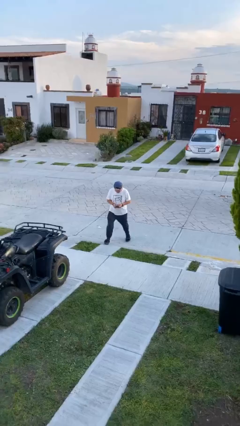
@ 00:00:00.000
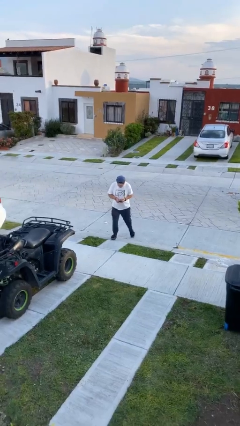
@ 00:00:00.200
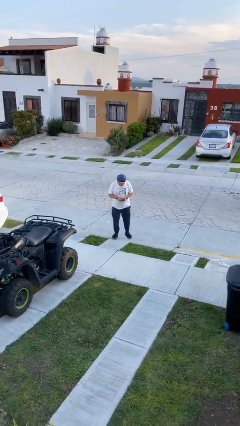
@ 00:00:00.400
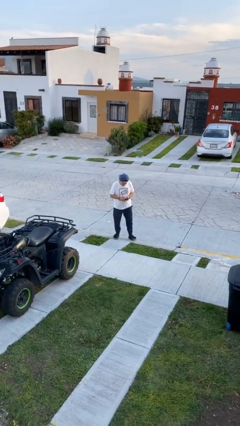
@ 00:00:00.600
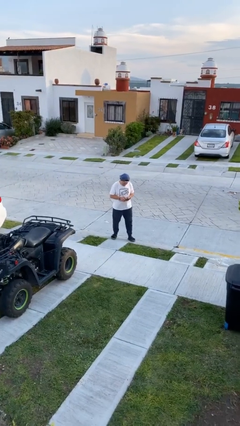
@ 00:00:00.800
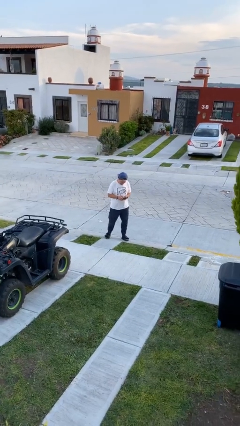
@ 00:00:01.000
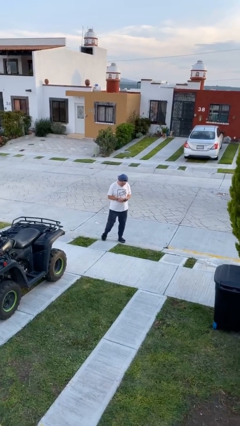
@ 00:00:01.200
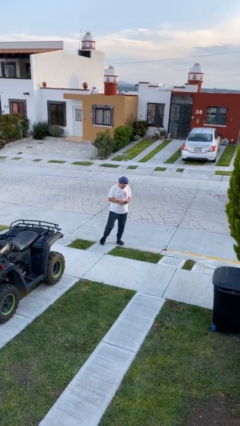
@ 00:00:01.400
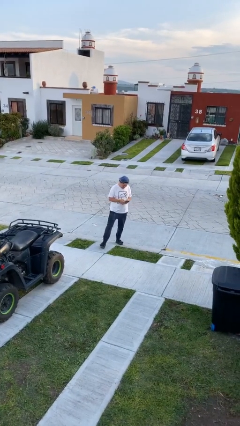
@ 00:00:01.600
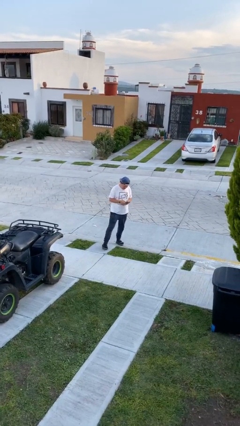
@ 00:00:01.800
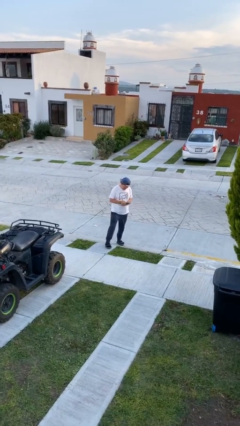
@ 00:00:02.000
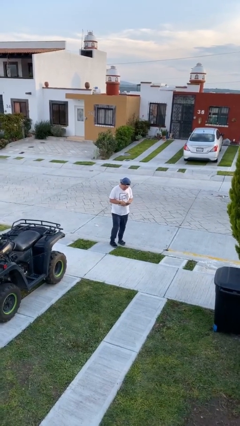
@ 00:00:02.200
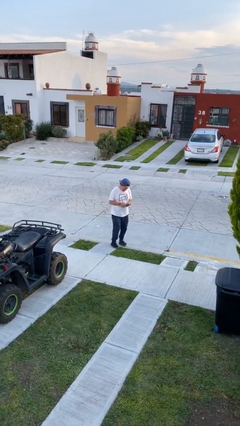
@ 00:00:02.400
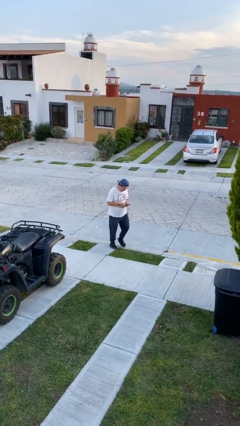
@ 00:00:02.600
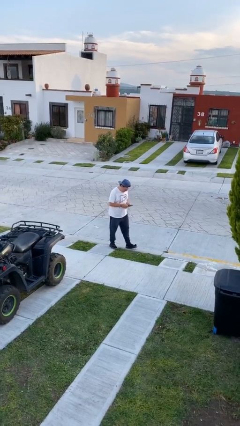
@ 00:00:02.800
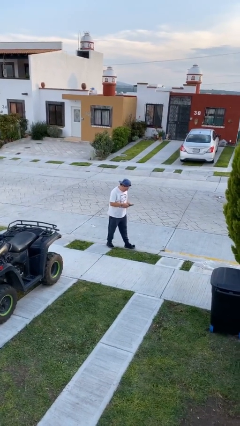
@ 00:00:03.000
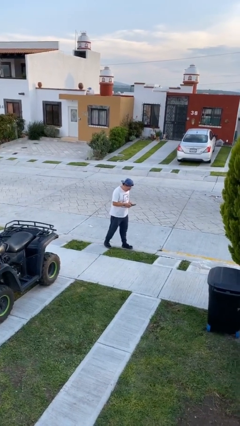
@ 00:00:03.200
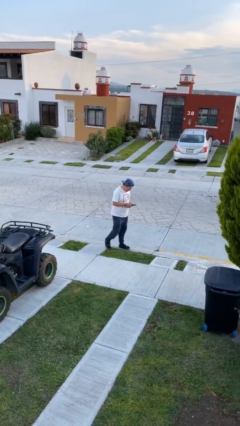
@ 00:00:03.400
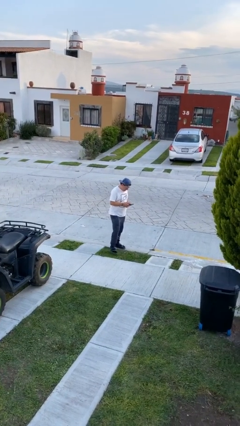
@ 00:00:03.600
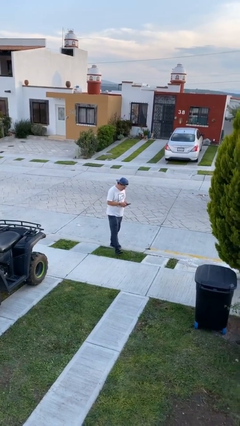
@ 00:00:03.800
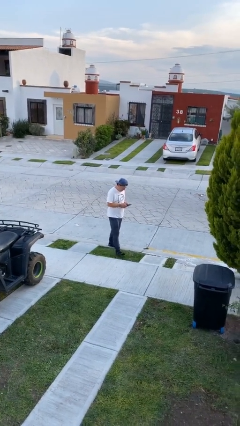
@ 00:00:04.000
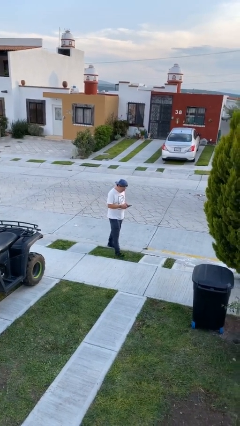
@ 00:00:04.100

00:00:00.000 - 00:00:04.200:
person texts on phone

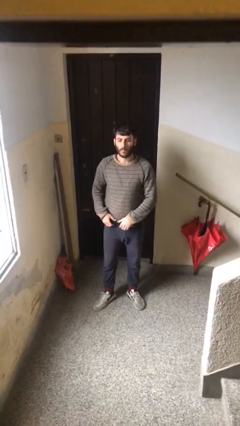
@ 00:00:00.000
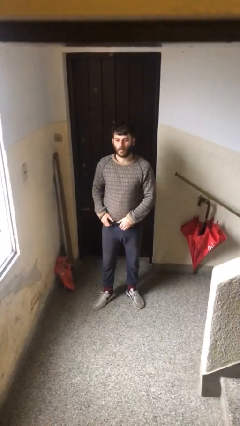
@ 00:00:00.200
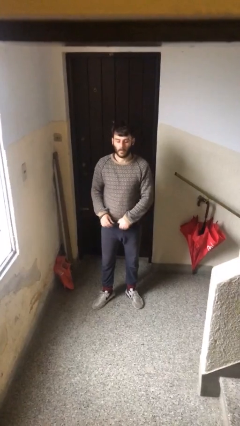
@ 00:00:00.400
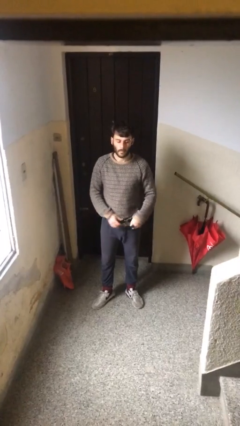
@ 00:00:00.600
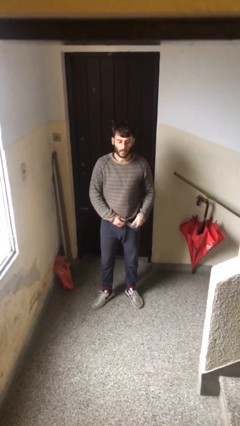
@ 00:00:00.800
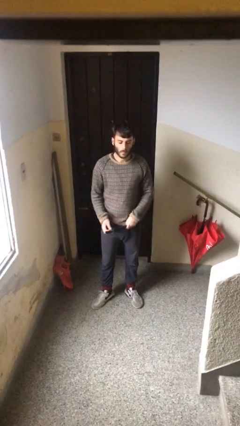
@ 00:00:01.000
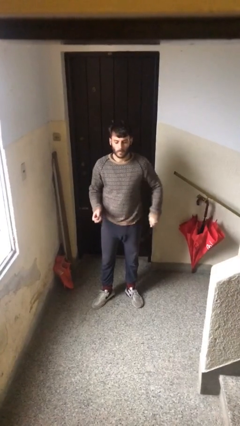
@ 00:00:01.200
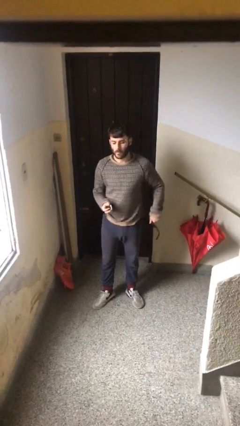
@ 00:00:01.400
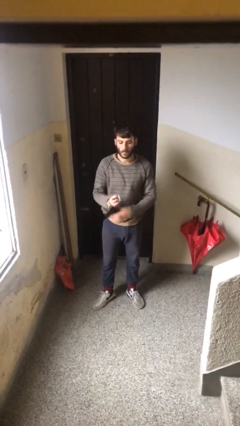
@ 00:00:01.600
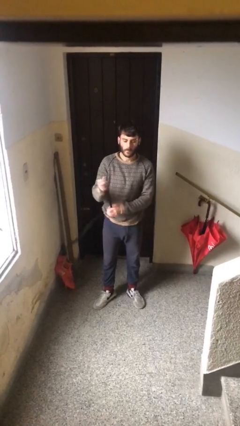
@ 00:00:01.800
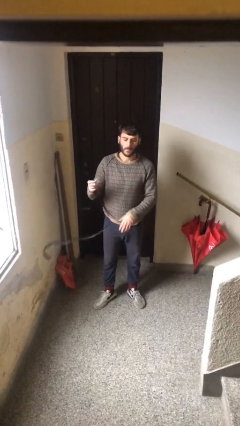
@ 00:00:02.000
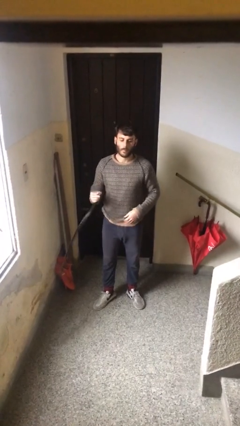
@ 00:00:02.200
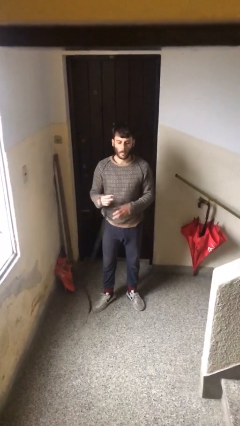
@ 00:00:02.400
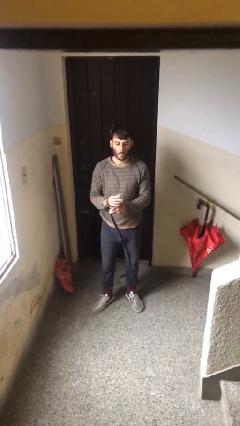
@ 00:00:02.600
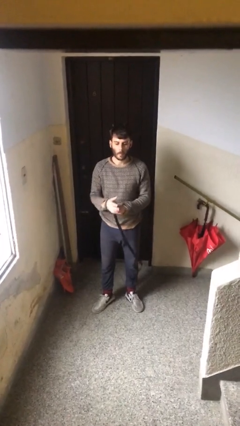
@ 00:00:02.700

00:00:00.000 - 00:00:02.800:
person takes off belt

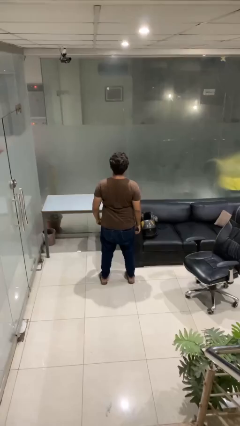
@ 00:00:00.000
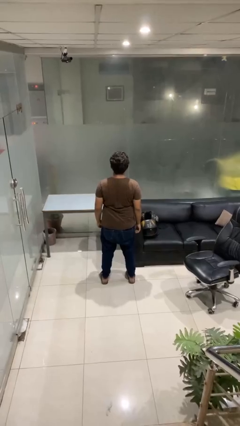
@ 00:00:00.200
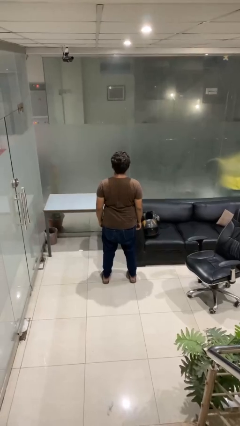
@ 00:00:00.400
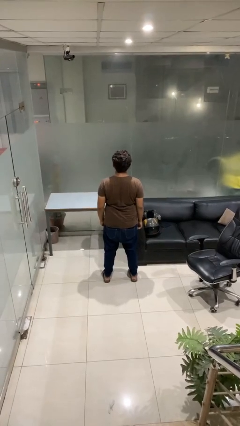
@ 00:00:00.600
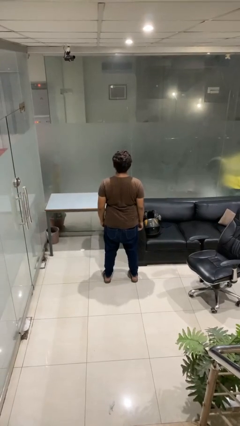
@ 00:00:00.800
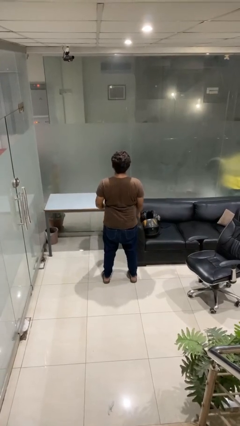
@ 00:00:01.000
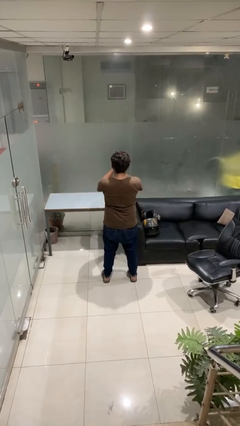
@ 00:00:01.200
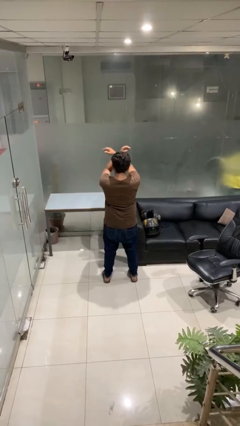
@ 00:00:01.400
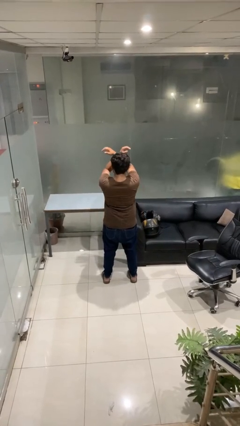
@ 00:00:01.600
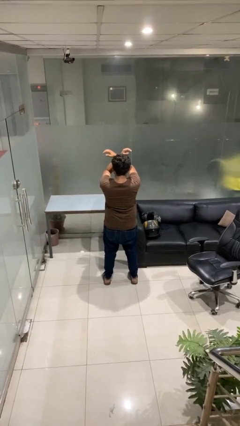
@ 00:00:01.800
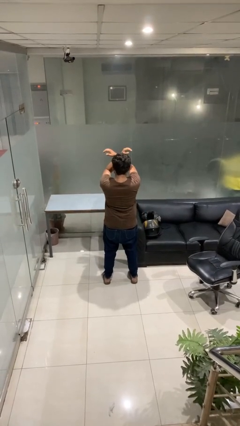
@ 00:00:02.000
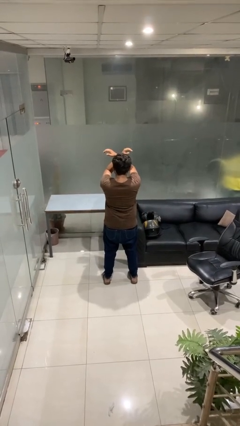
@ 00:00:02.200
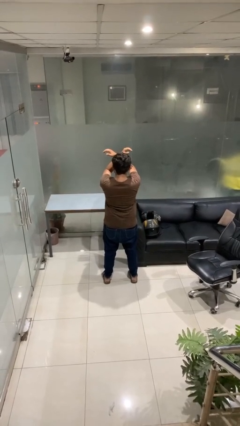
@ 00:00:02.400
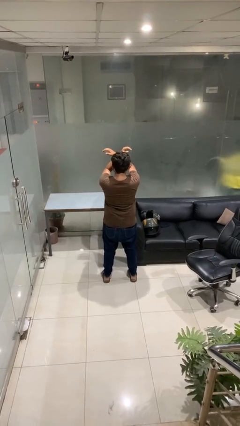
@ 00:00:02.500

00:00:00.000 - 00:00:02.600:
person gestures arms x

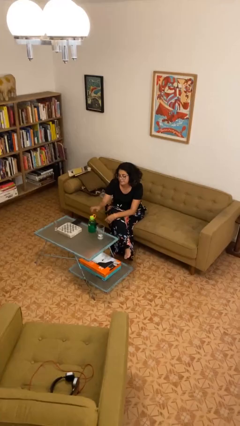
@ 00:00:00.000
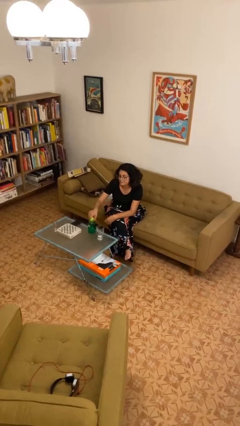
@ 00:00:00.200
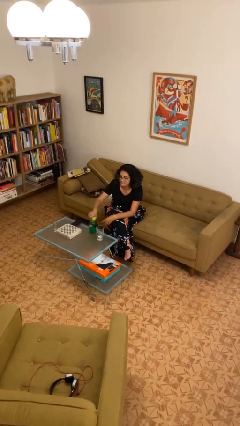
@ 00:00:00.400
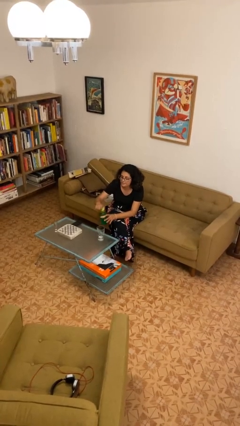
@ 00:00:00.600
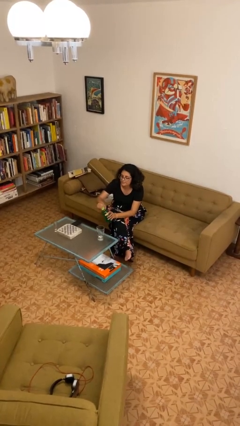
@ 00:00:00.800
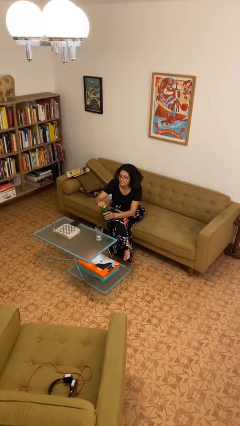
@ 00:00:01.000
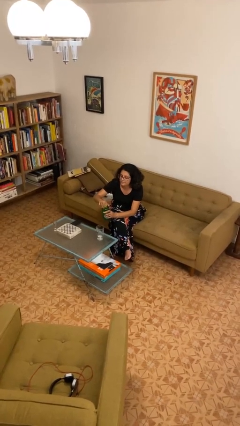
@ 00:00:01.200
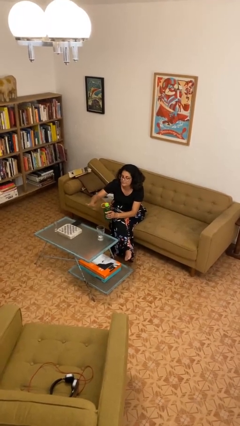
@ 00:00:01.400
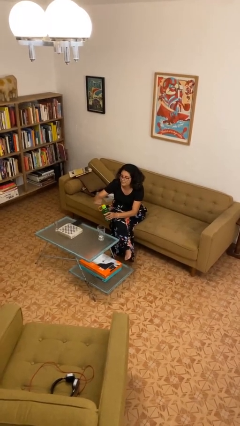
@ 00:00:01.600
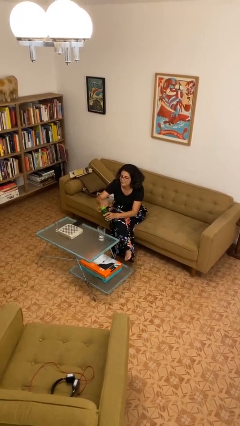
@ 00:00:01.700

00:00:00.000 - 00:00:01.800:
person unscrews lid from bottle

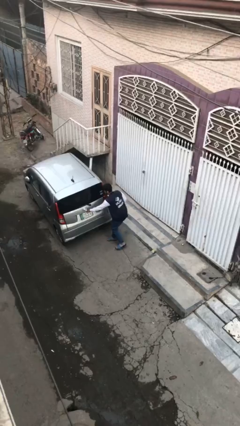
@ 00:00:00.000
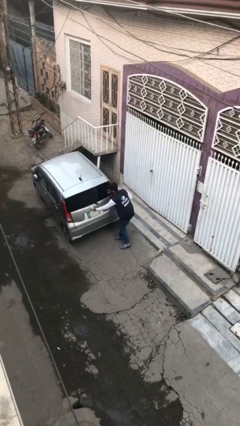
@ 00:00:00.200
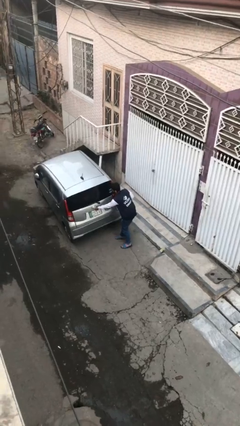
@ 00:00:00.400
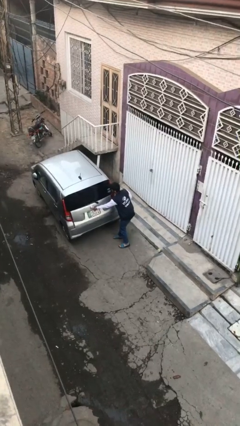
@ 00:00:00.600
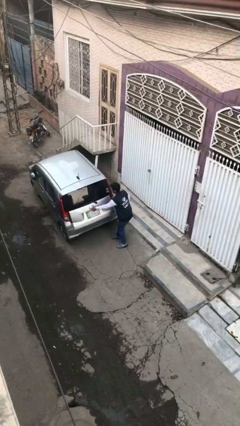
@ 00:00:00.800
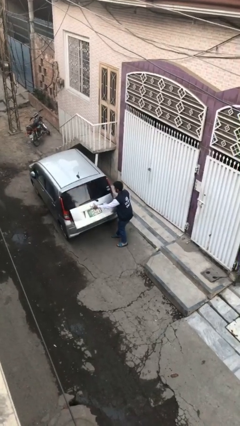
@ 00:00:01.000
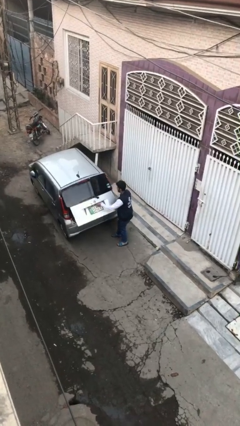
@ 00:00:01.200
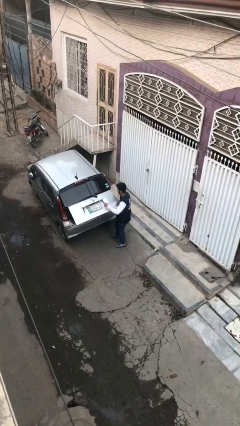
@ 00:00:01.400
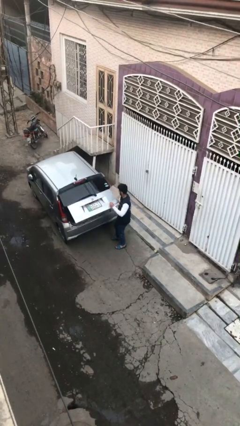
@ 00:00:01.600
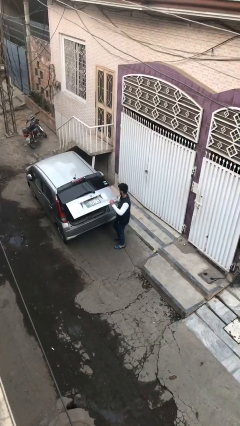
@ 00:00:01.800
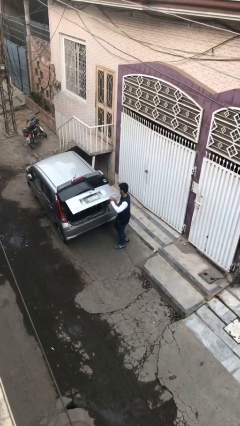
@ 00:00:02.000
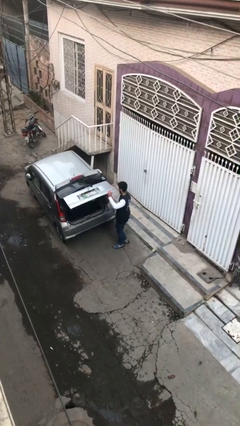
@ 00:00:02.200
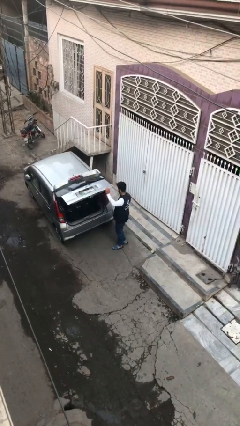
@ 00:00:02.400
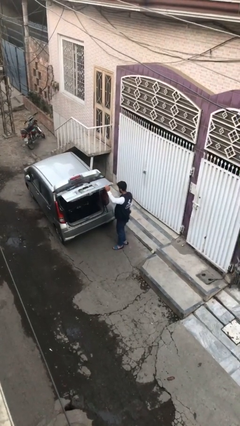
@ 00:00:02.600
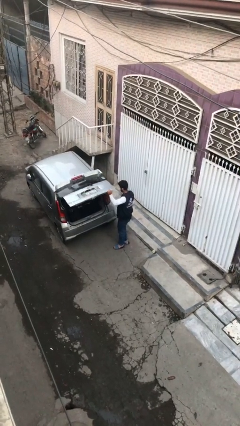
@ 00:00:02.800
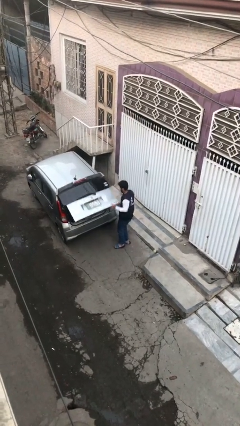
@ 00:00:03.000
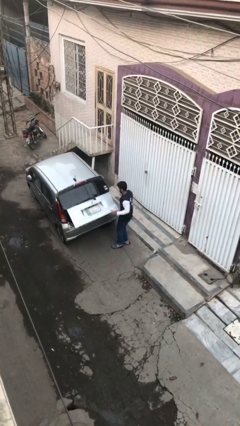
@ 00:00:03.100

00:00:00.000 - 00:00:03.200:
person opens car trunk

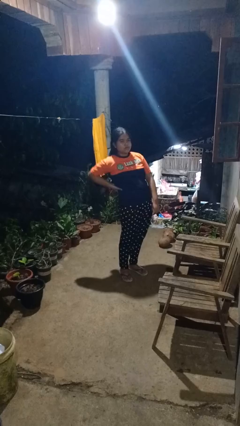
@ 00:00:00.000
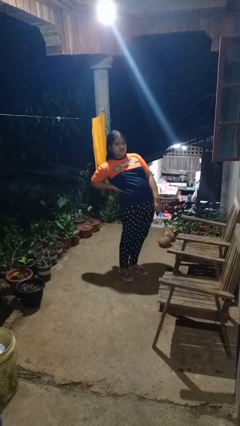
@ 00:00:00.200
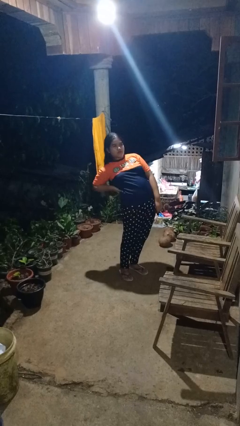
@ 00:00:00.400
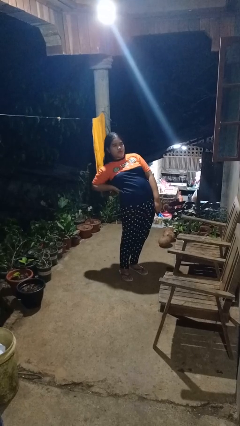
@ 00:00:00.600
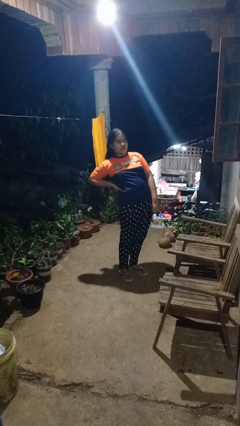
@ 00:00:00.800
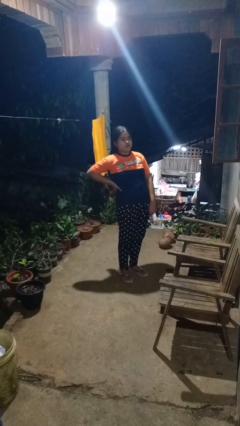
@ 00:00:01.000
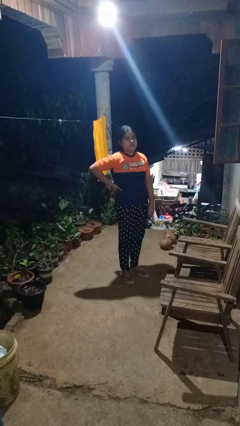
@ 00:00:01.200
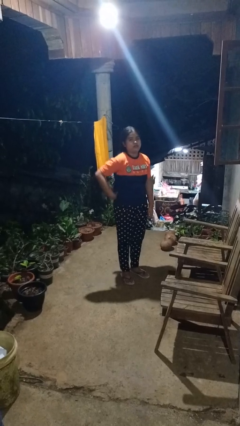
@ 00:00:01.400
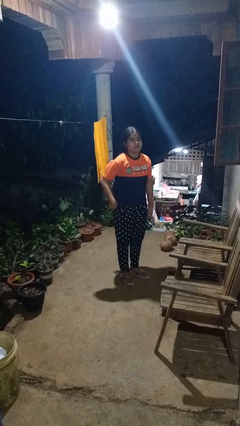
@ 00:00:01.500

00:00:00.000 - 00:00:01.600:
person stretches back

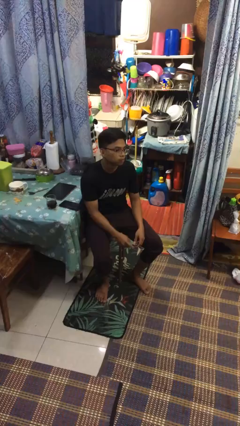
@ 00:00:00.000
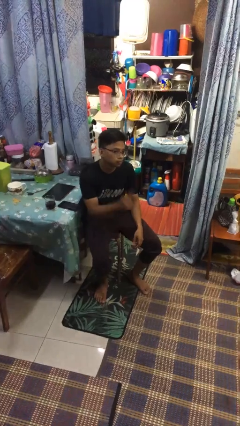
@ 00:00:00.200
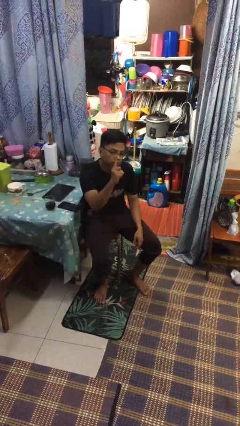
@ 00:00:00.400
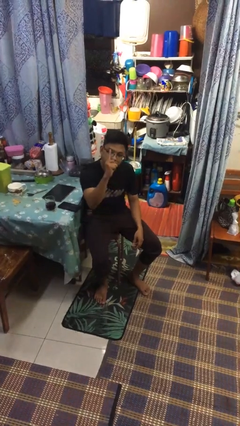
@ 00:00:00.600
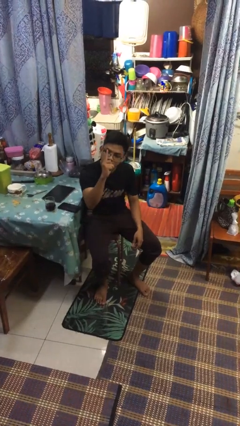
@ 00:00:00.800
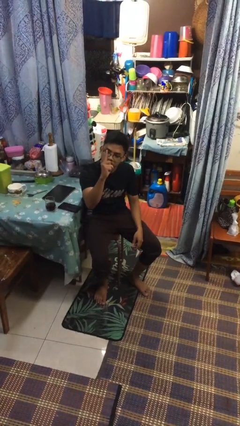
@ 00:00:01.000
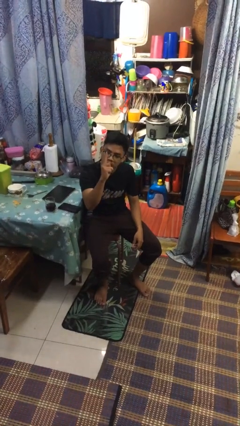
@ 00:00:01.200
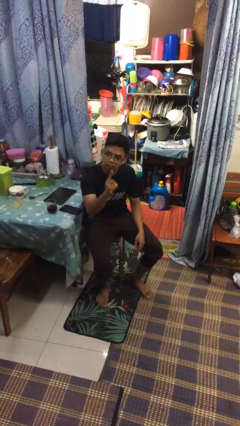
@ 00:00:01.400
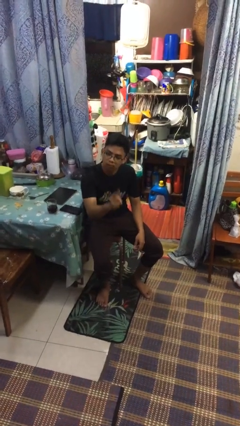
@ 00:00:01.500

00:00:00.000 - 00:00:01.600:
person gestures number one
